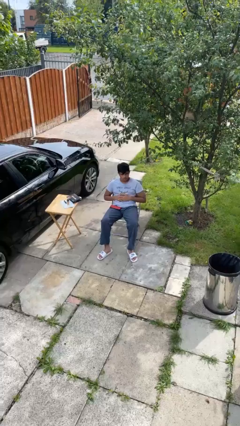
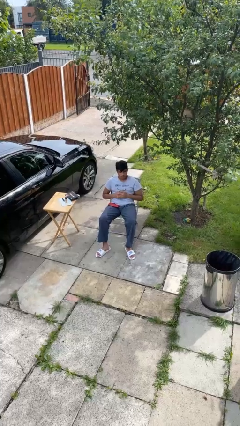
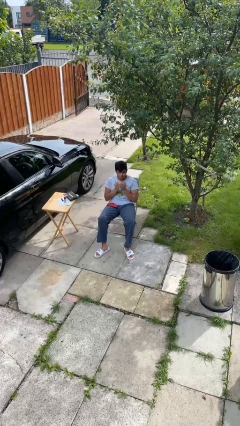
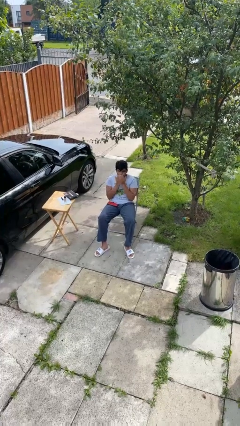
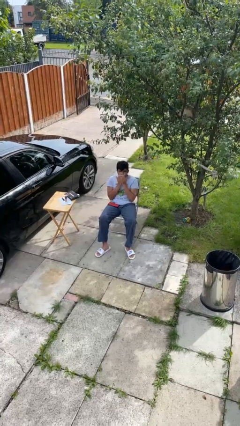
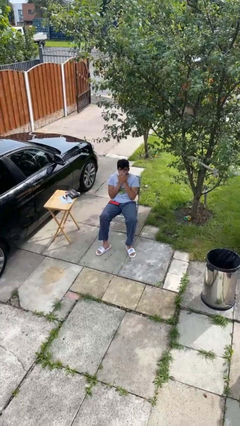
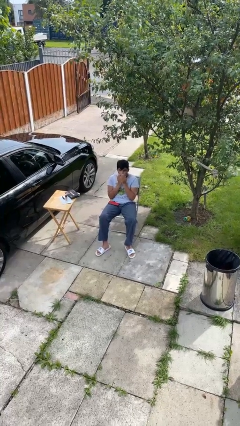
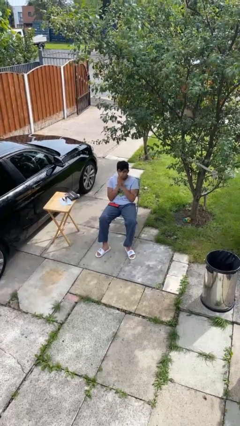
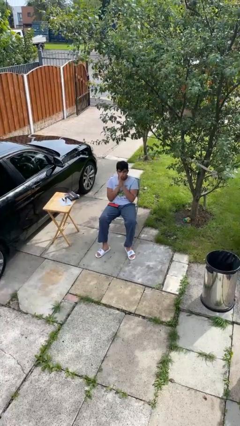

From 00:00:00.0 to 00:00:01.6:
person blows into hands

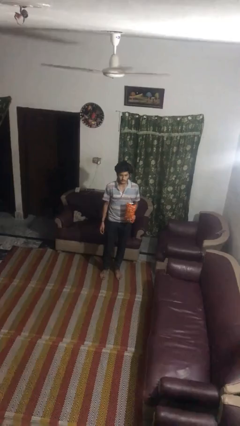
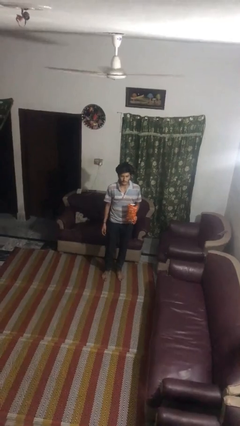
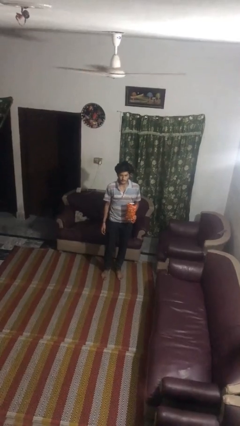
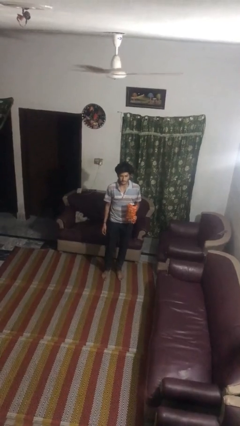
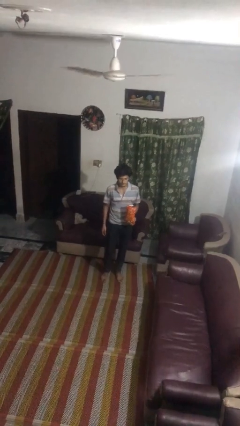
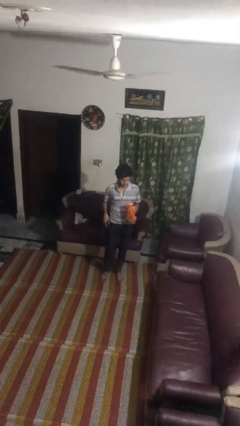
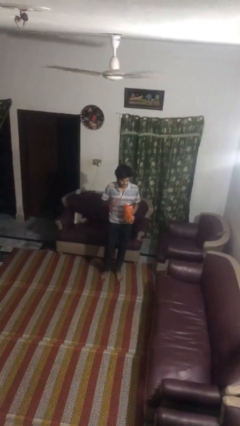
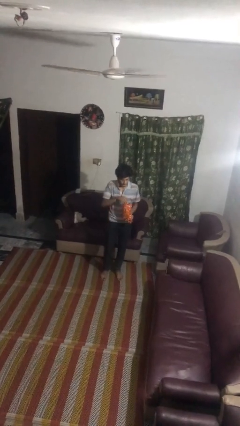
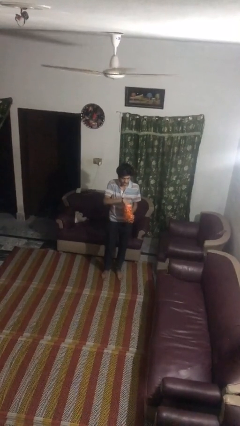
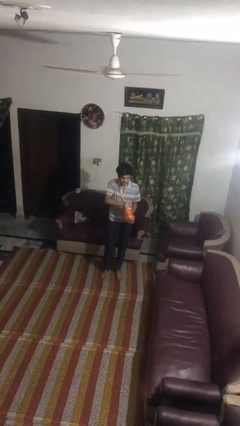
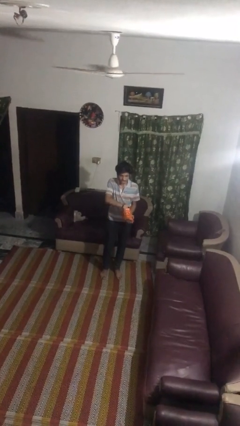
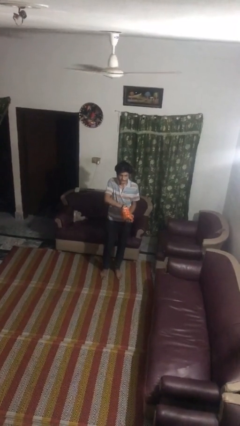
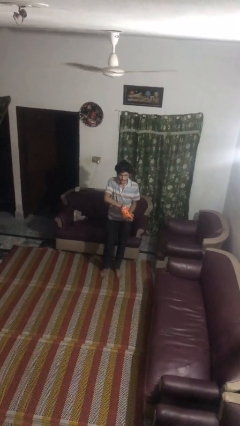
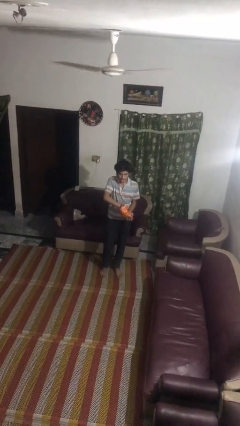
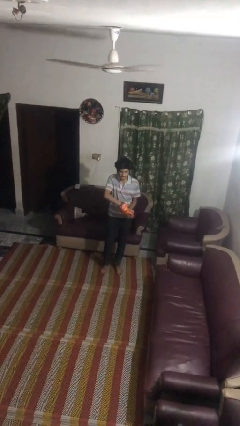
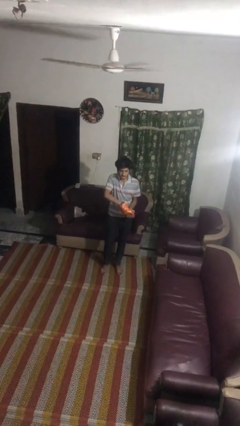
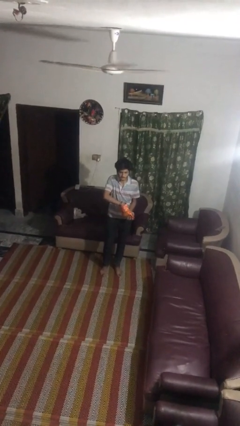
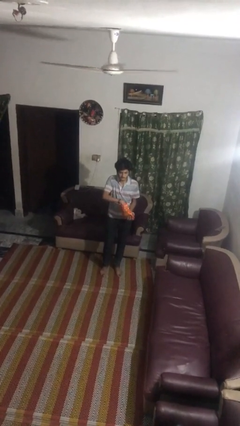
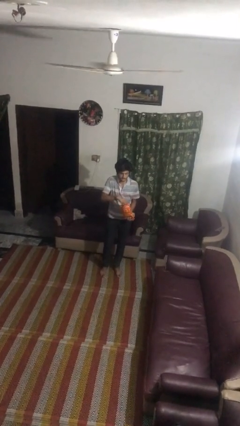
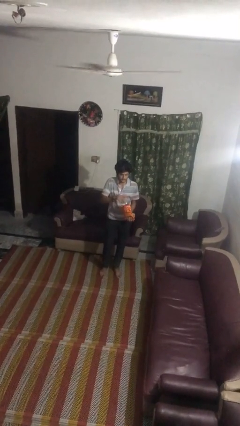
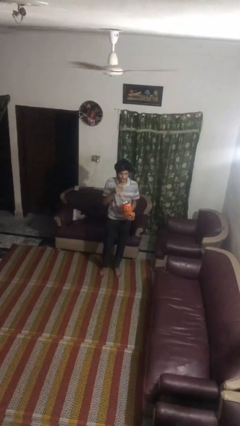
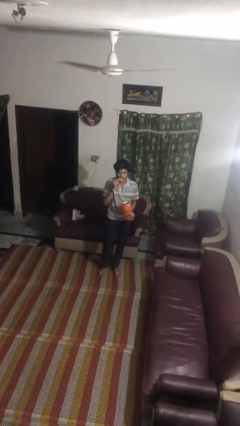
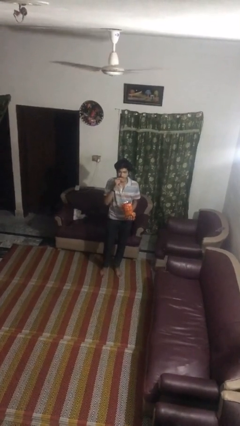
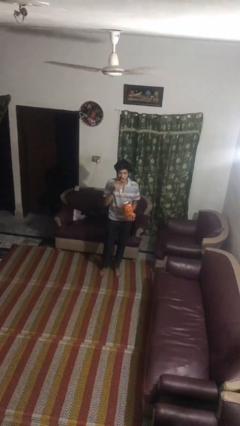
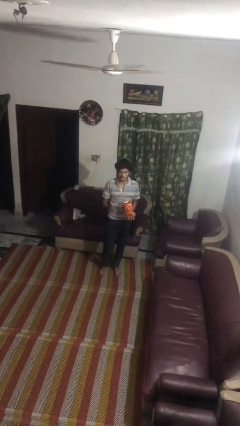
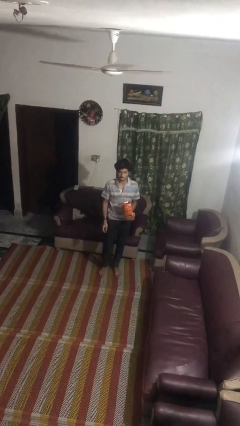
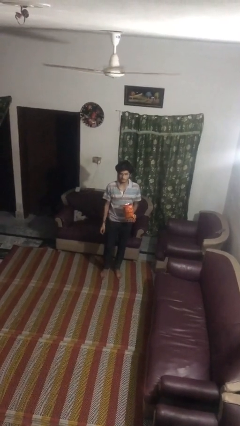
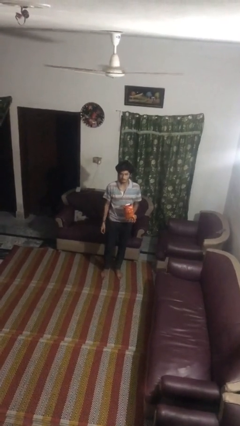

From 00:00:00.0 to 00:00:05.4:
person eats snack from bag

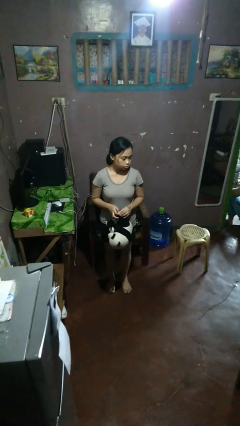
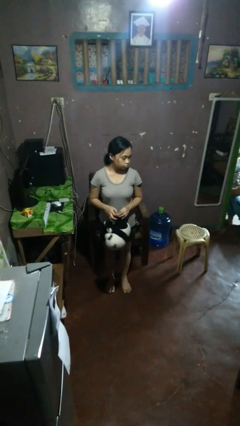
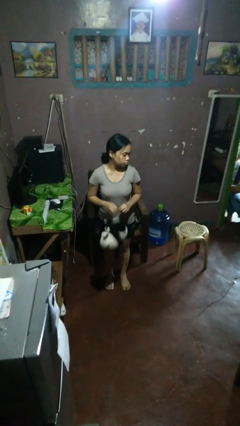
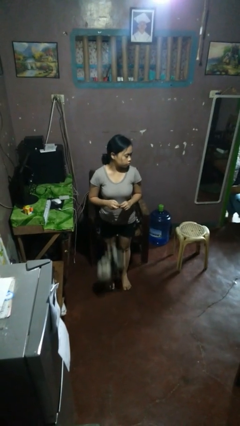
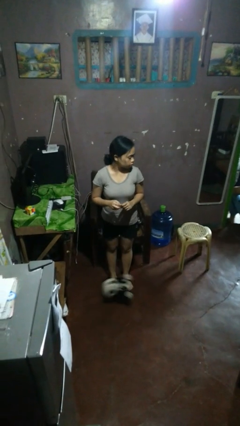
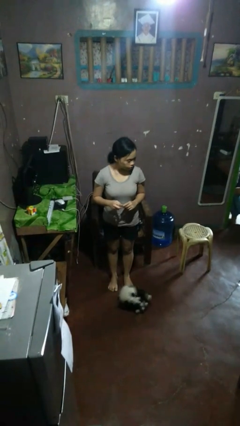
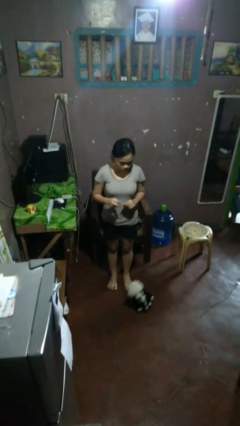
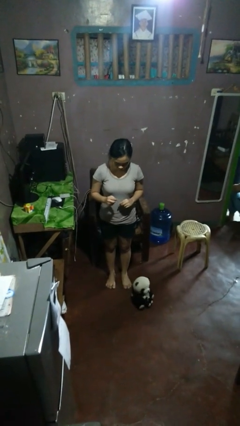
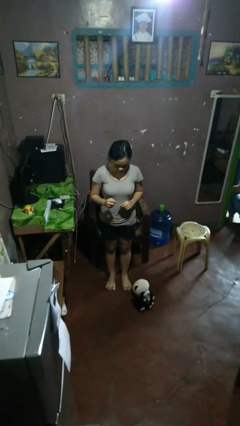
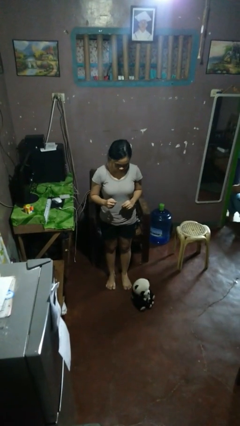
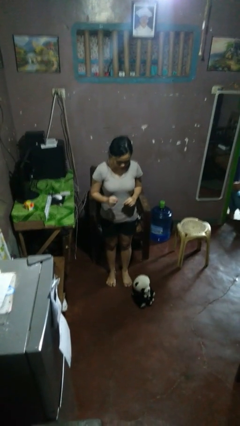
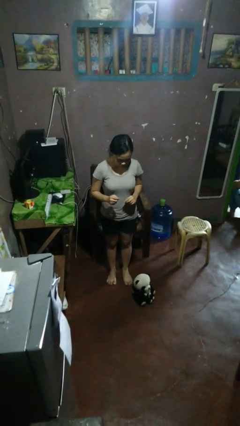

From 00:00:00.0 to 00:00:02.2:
person drops object

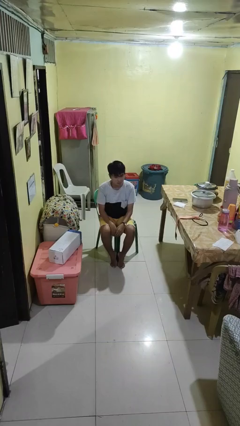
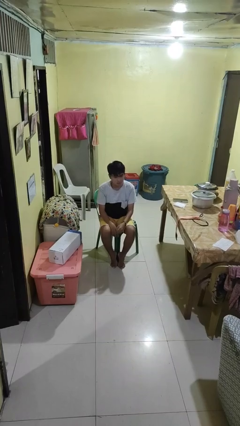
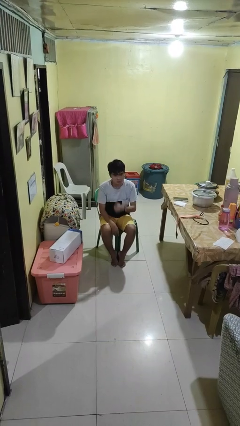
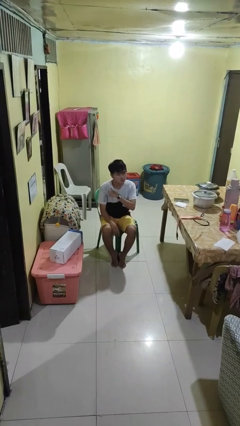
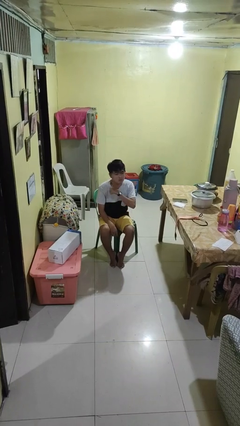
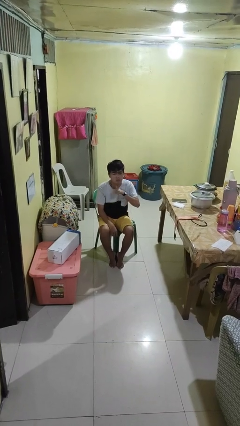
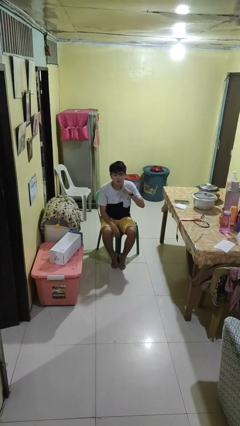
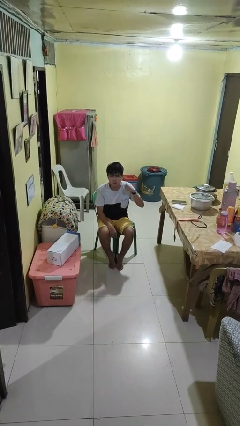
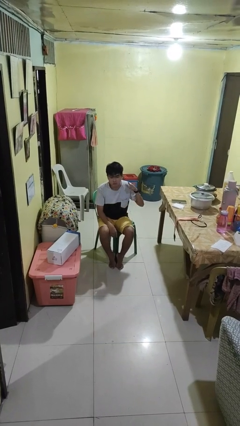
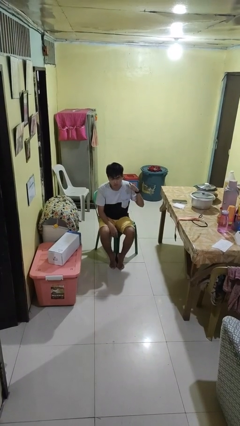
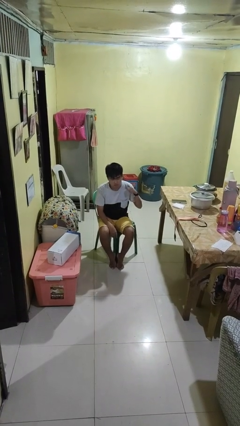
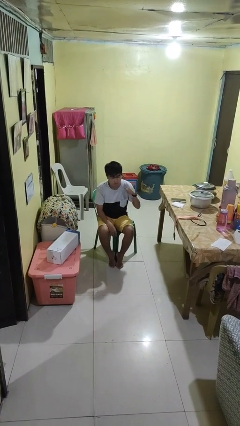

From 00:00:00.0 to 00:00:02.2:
person gestures cut

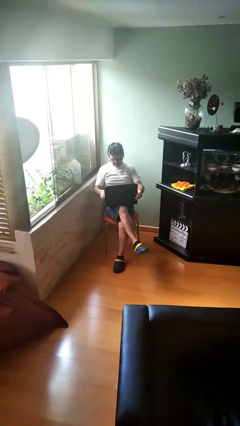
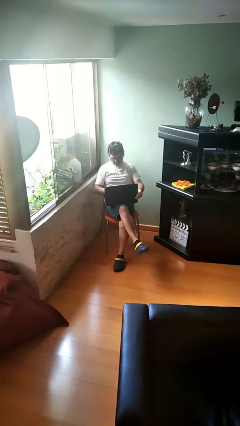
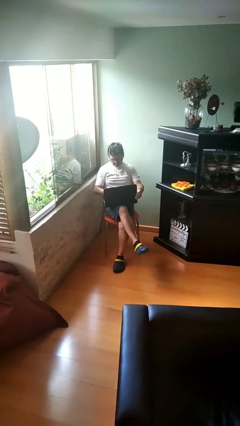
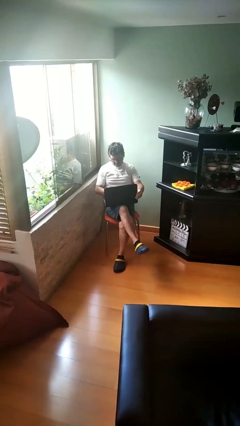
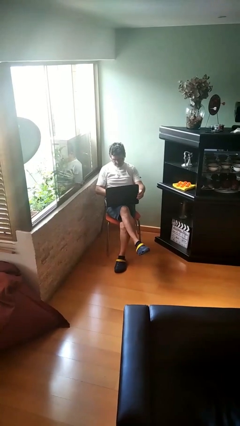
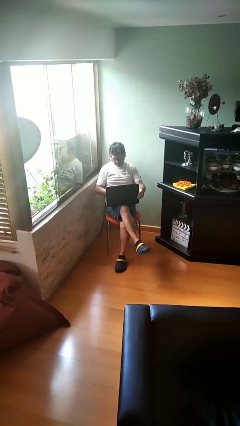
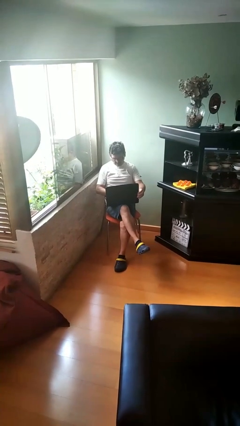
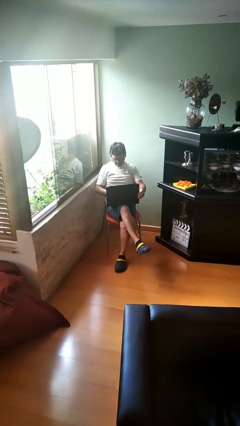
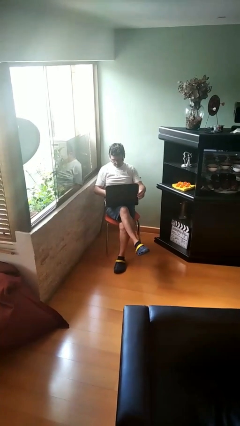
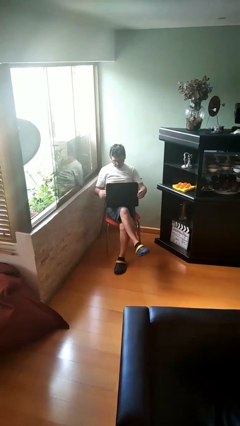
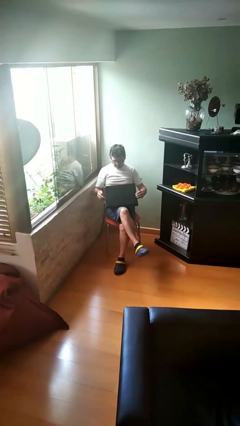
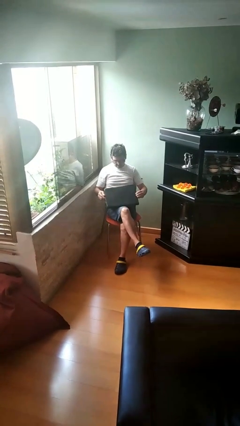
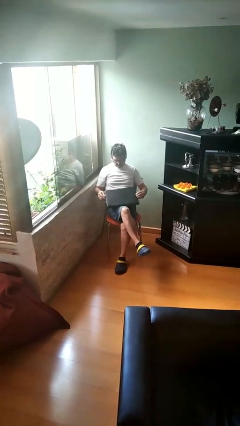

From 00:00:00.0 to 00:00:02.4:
person interacts with laptop

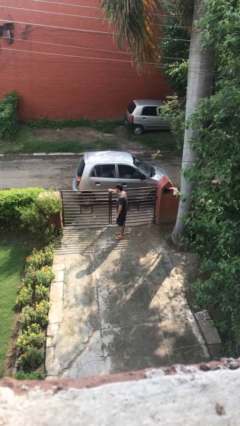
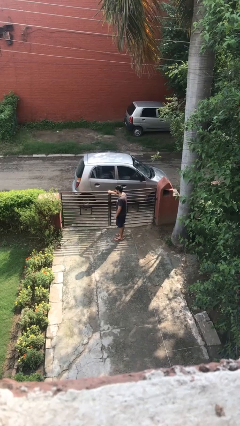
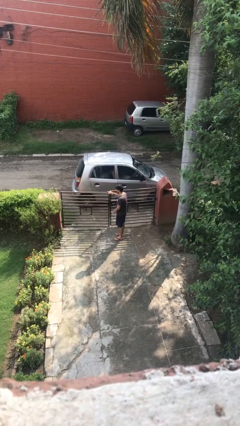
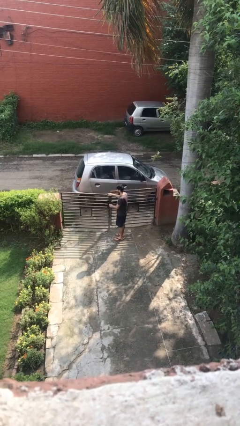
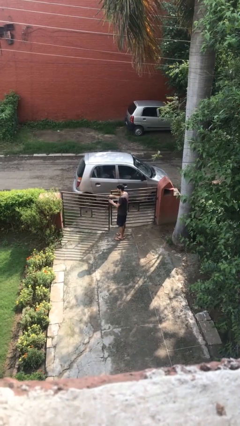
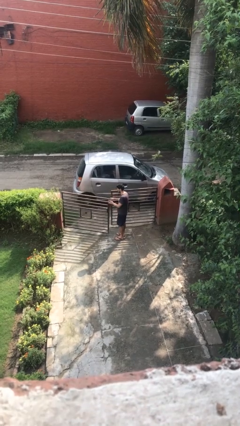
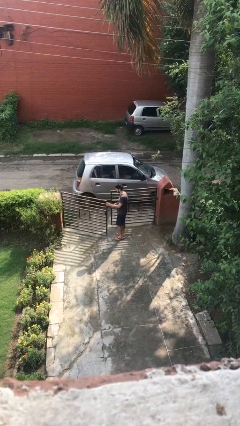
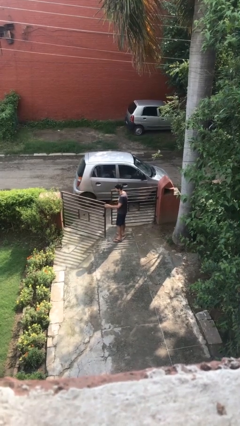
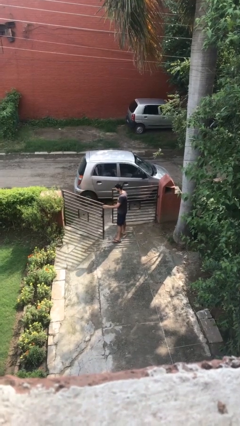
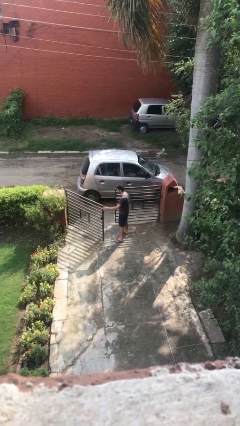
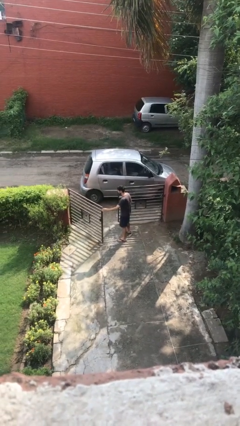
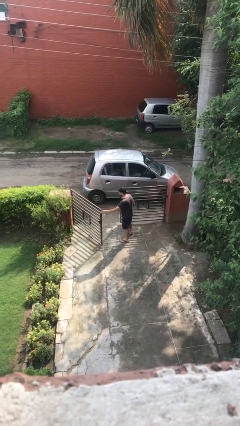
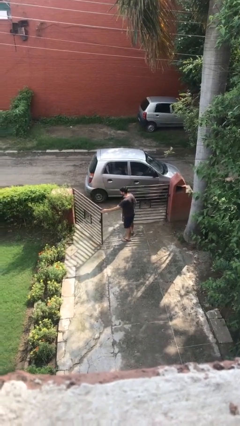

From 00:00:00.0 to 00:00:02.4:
person opens gate

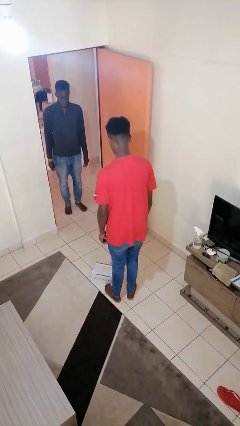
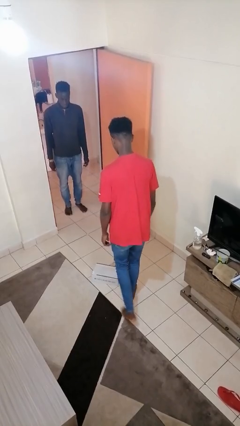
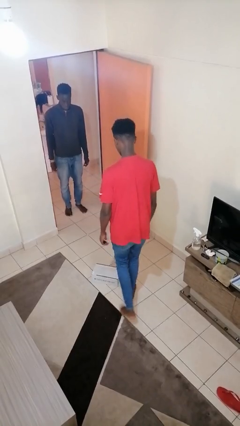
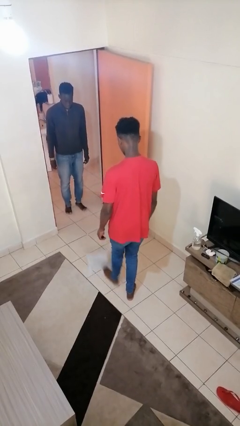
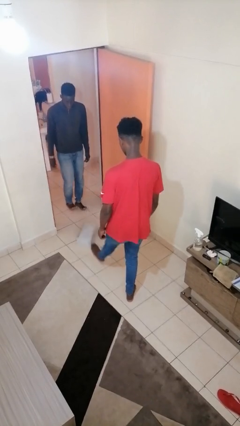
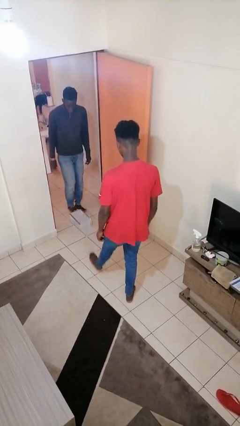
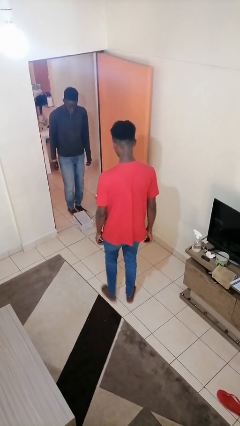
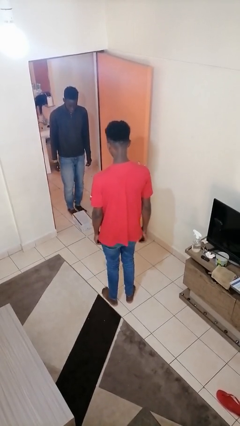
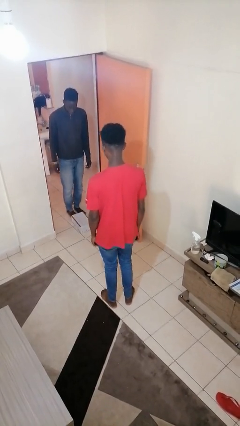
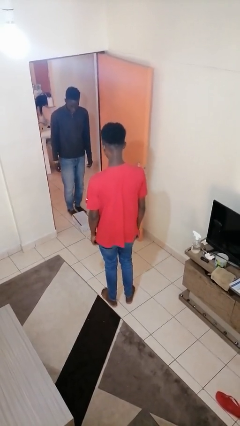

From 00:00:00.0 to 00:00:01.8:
person kicks object to person
